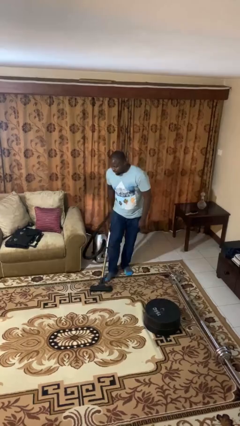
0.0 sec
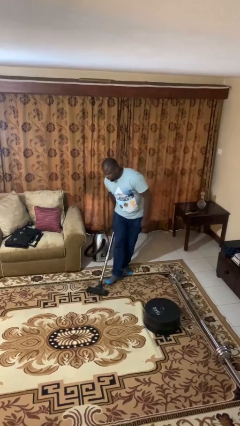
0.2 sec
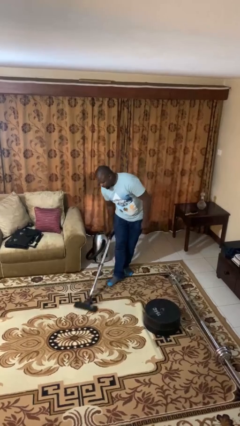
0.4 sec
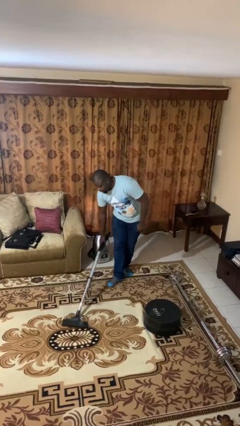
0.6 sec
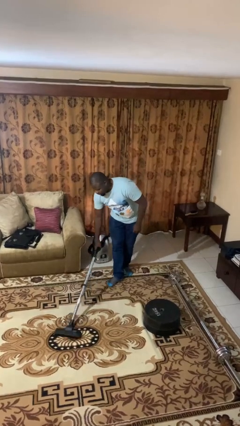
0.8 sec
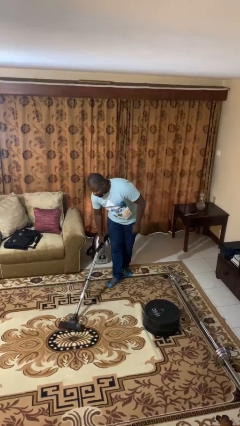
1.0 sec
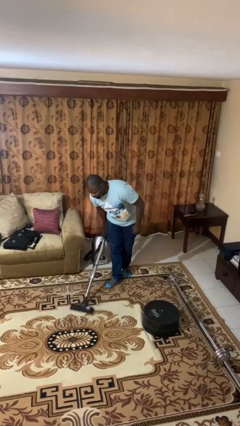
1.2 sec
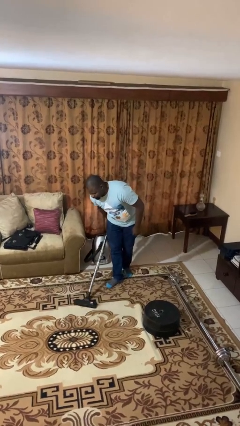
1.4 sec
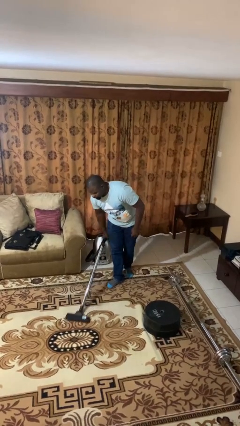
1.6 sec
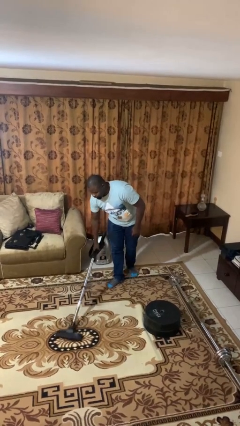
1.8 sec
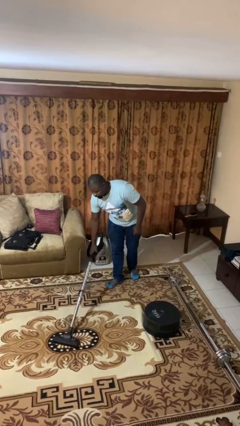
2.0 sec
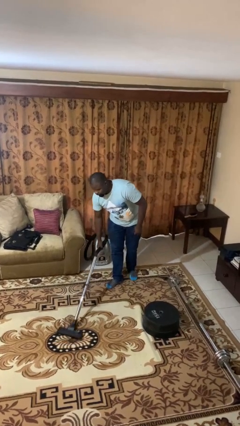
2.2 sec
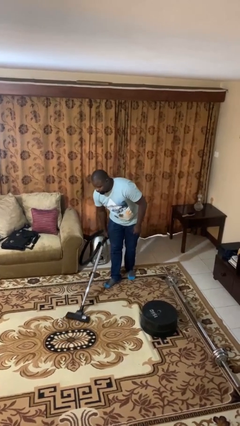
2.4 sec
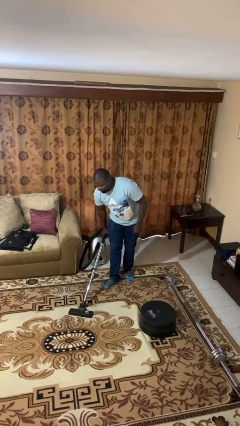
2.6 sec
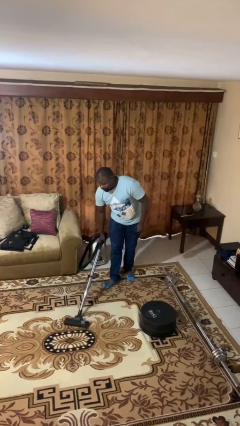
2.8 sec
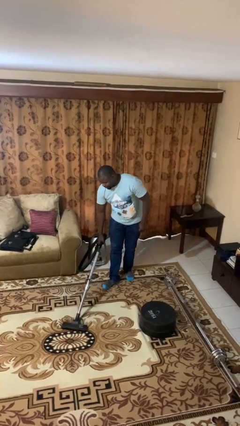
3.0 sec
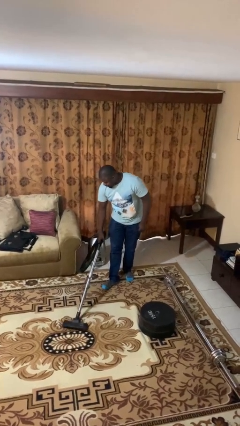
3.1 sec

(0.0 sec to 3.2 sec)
person vacuums carpet

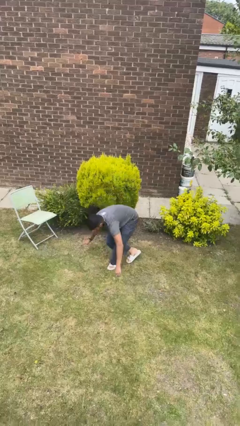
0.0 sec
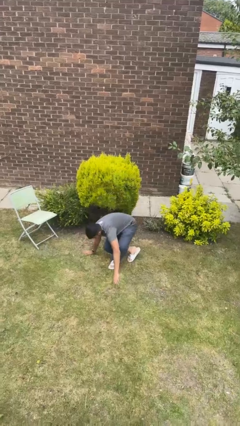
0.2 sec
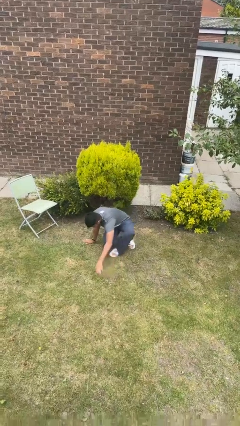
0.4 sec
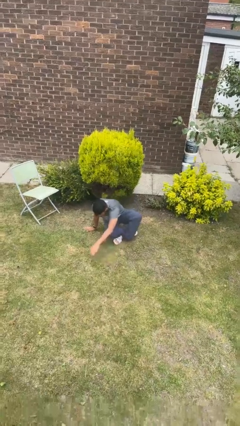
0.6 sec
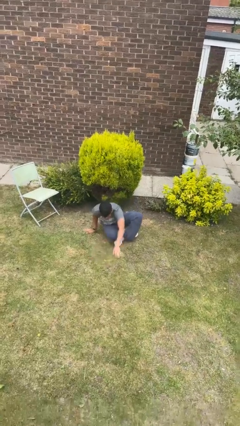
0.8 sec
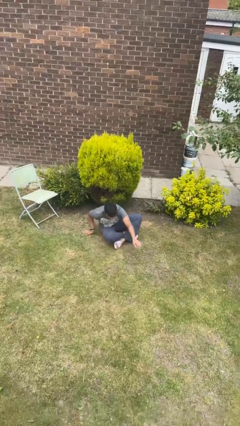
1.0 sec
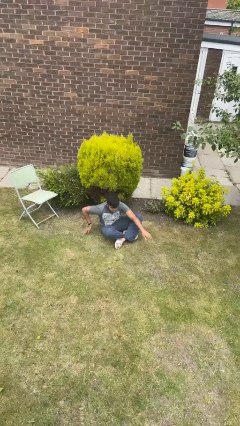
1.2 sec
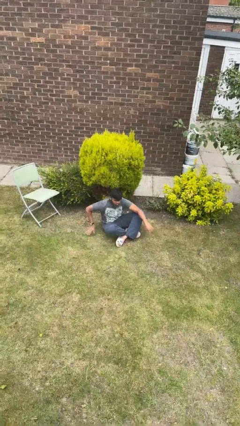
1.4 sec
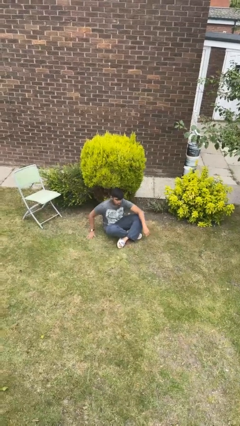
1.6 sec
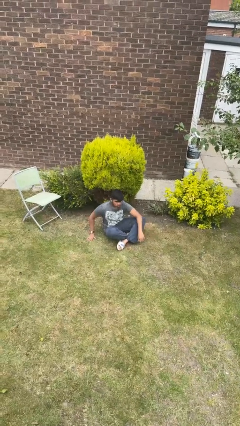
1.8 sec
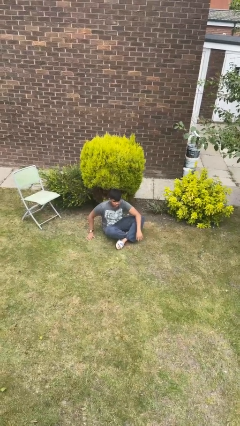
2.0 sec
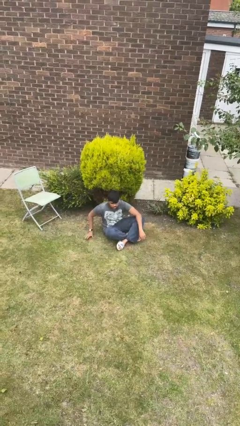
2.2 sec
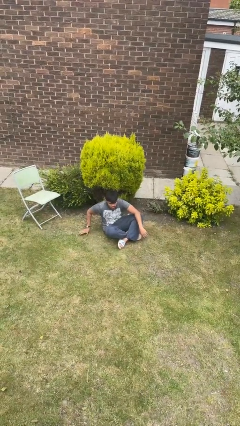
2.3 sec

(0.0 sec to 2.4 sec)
person sits crisscross

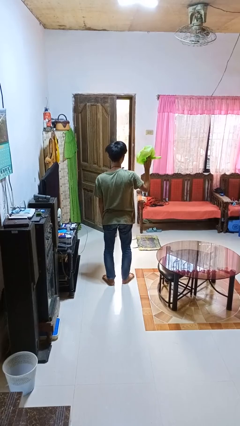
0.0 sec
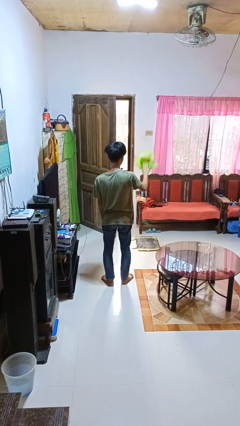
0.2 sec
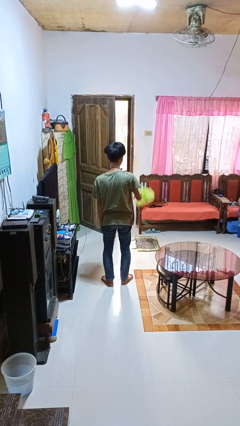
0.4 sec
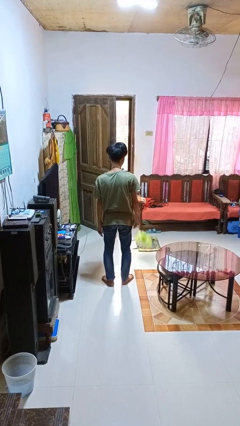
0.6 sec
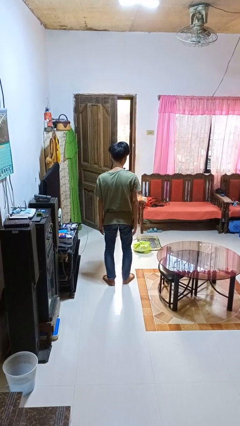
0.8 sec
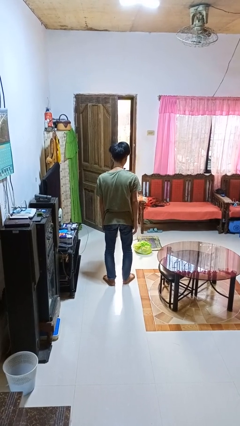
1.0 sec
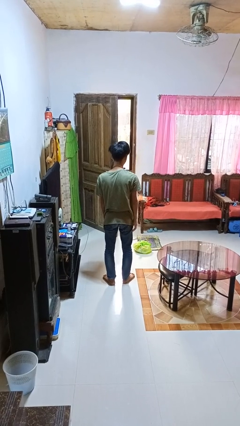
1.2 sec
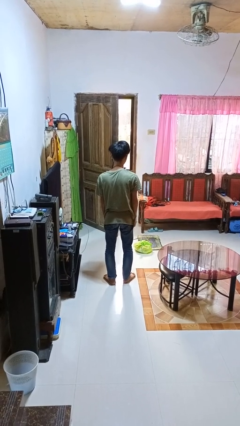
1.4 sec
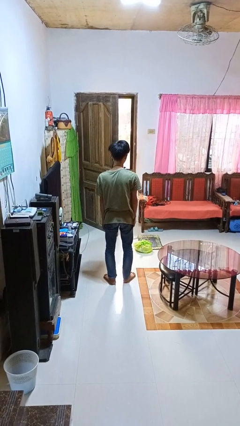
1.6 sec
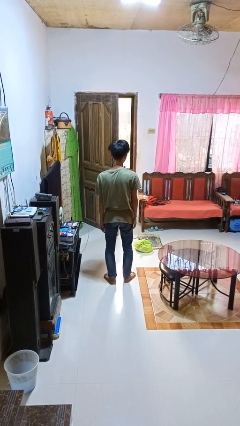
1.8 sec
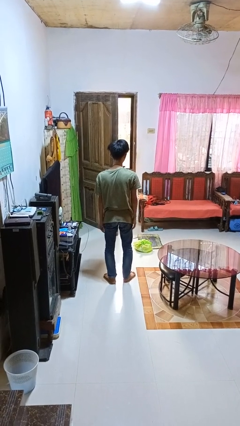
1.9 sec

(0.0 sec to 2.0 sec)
person throws object to ground

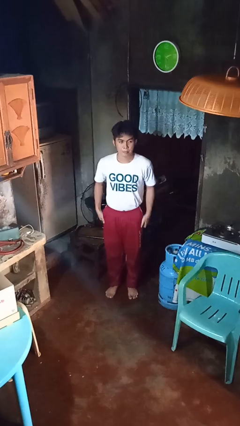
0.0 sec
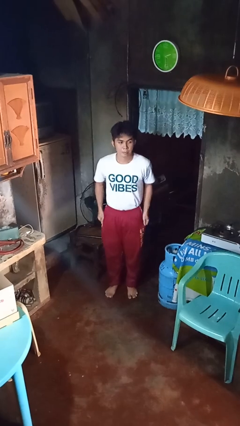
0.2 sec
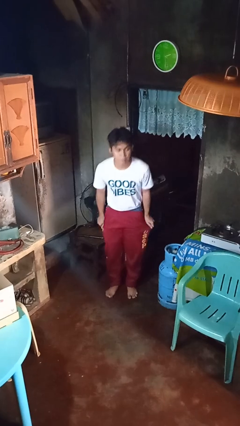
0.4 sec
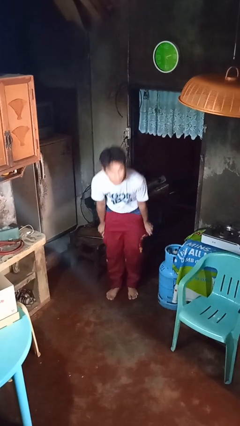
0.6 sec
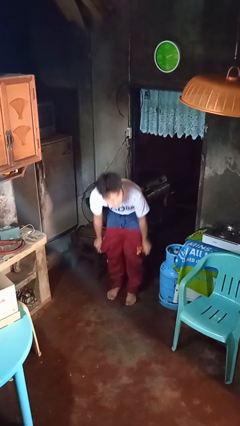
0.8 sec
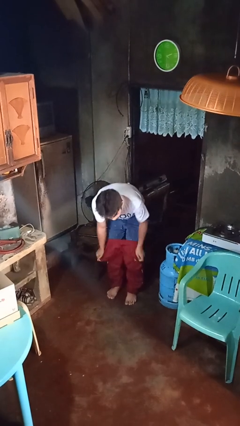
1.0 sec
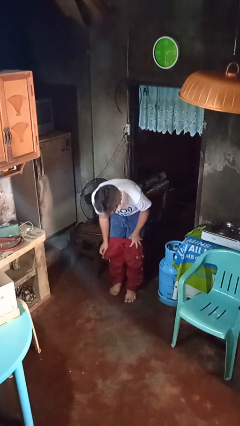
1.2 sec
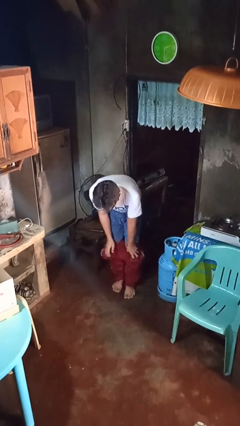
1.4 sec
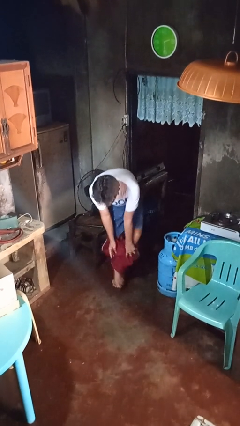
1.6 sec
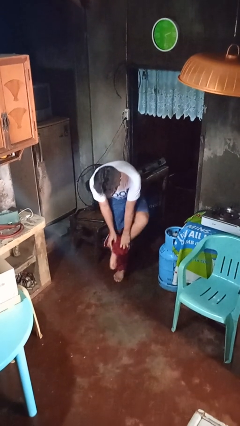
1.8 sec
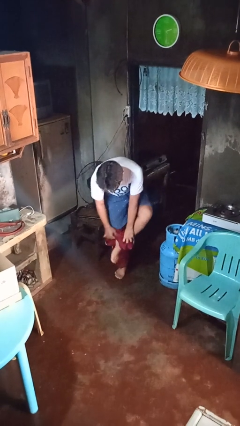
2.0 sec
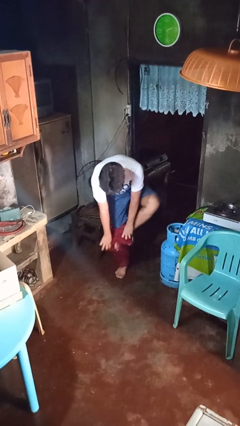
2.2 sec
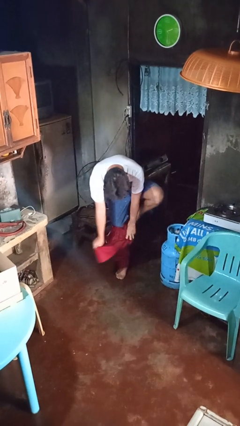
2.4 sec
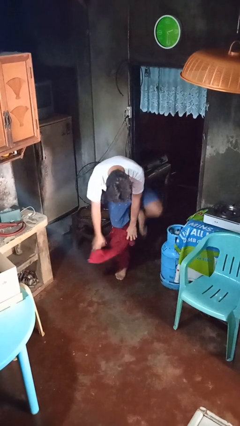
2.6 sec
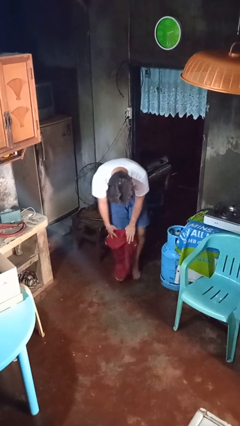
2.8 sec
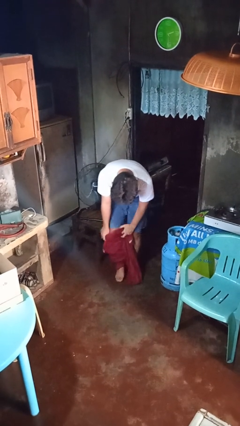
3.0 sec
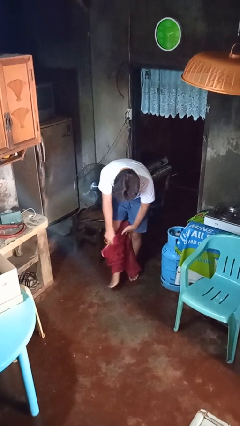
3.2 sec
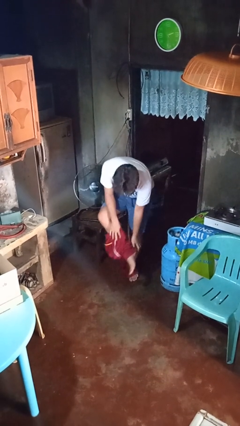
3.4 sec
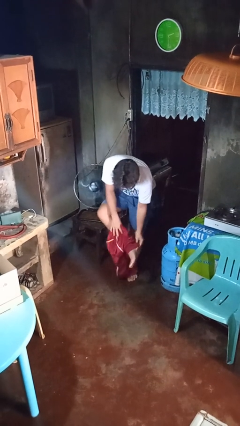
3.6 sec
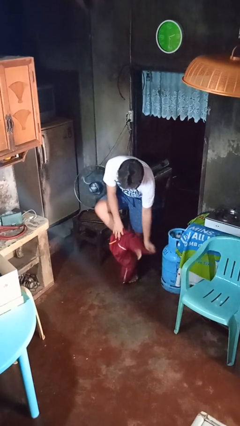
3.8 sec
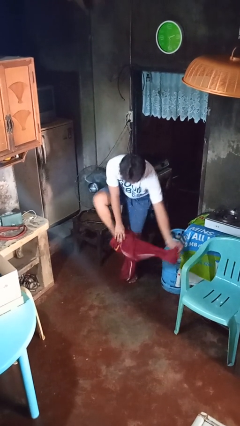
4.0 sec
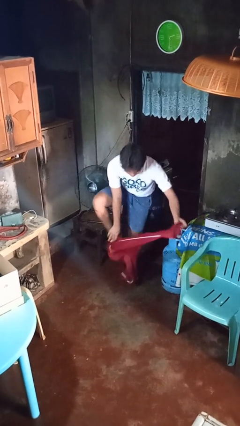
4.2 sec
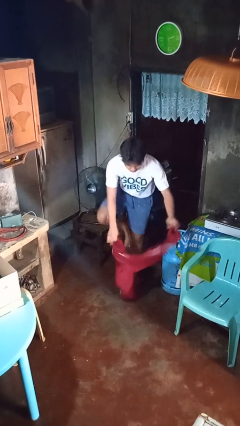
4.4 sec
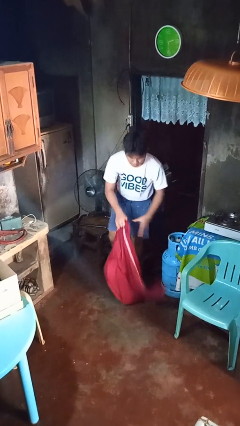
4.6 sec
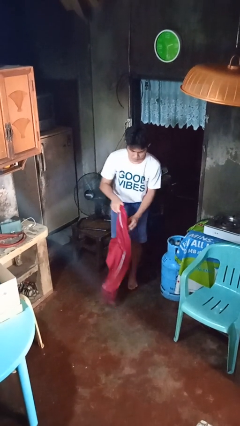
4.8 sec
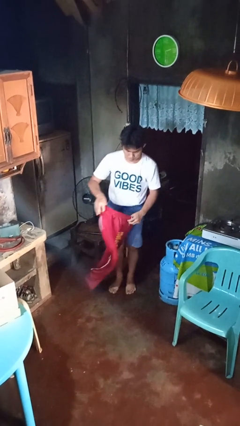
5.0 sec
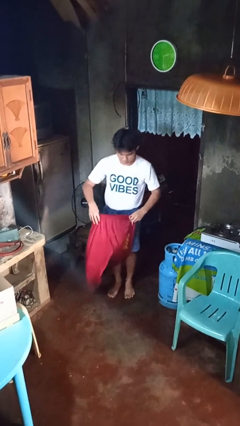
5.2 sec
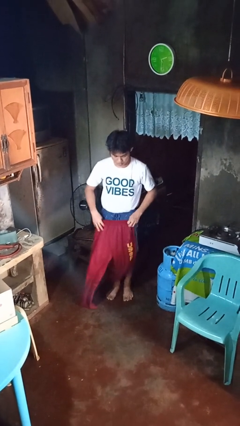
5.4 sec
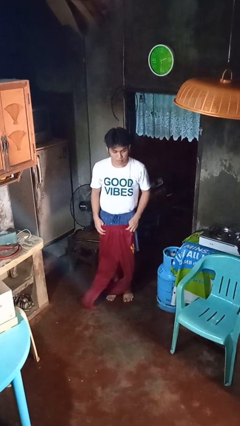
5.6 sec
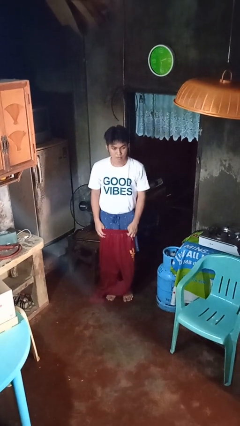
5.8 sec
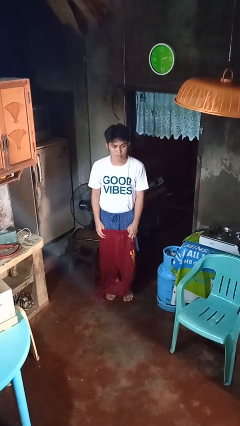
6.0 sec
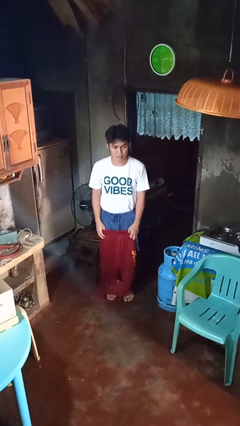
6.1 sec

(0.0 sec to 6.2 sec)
person takes off pants

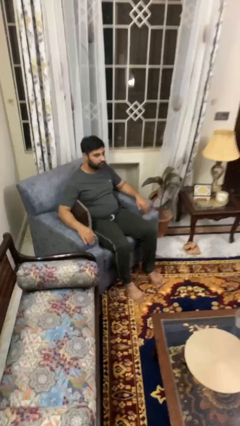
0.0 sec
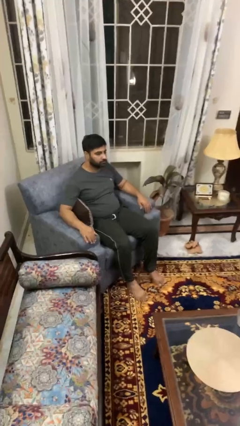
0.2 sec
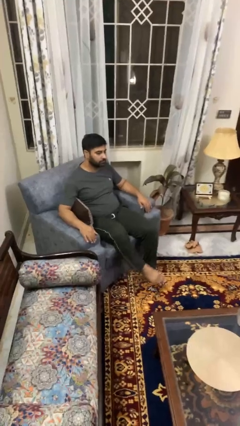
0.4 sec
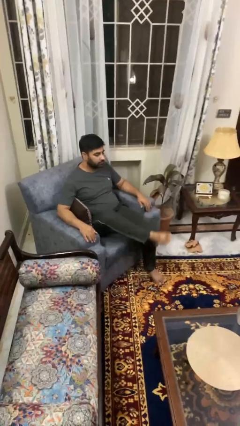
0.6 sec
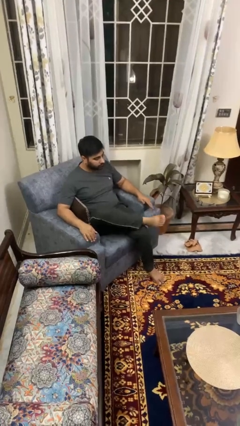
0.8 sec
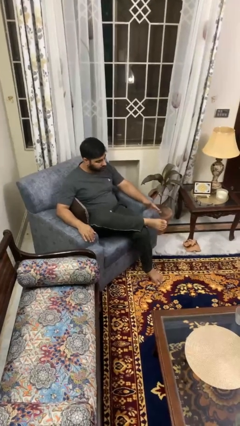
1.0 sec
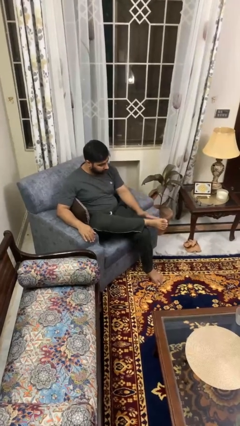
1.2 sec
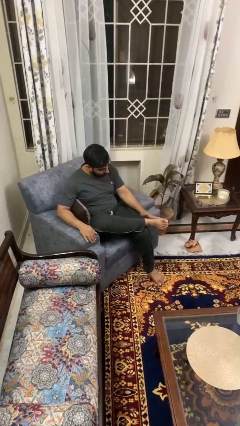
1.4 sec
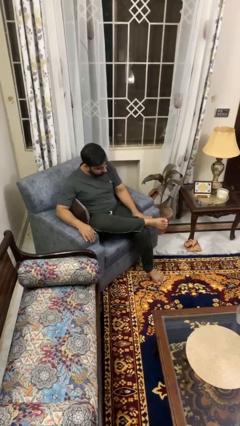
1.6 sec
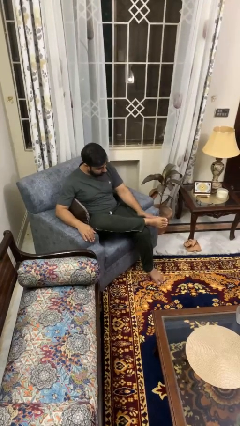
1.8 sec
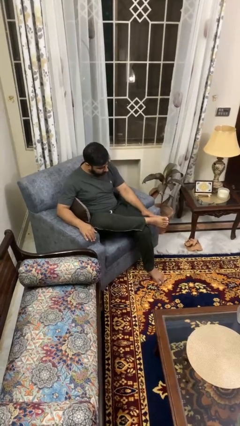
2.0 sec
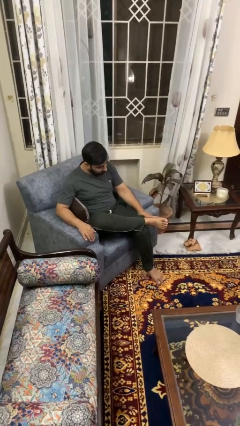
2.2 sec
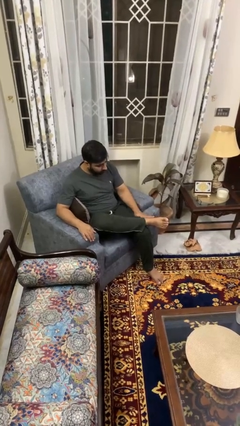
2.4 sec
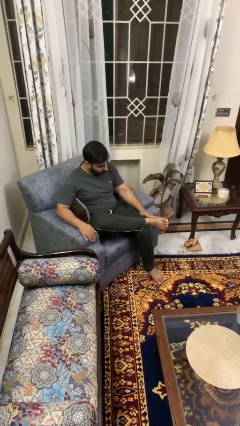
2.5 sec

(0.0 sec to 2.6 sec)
person rubs foot

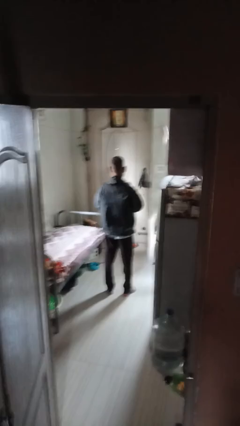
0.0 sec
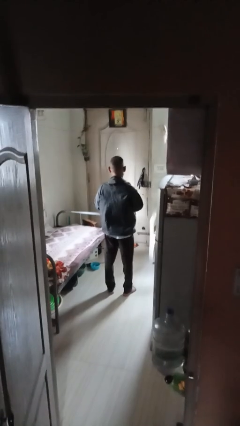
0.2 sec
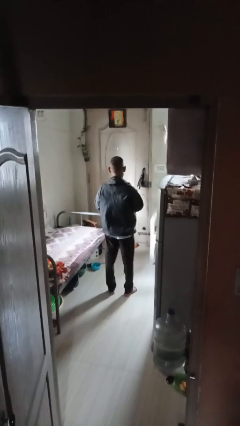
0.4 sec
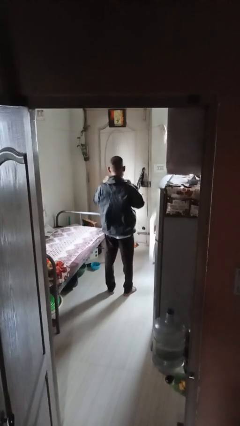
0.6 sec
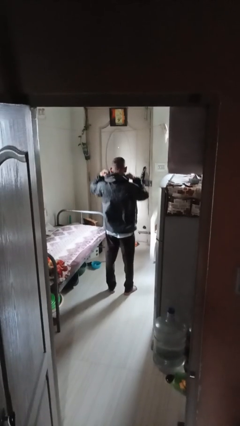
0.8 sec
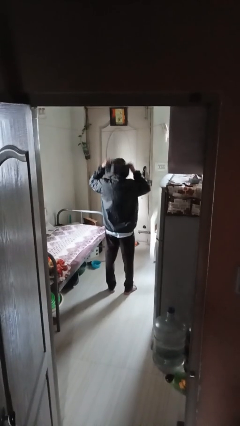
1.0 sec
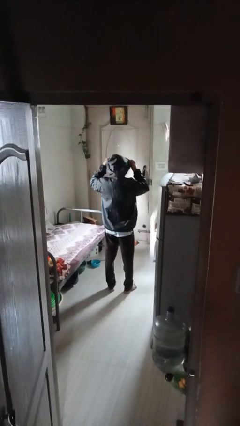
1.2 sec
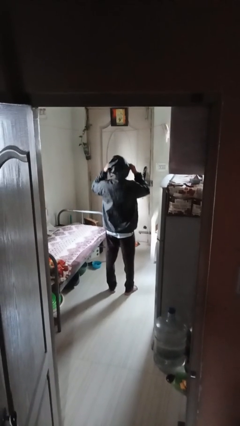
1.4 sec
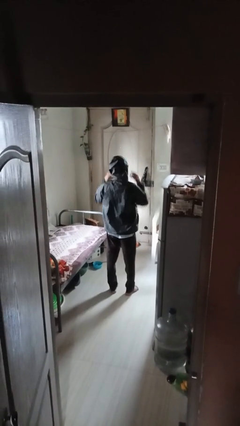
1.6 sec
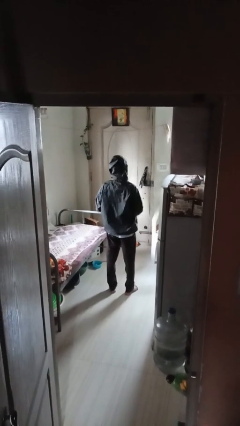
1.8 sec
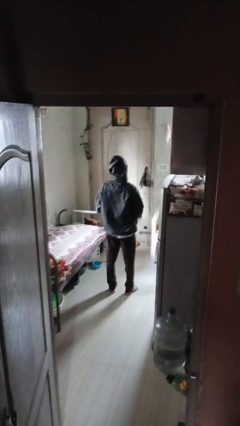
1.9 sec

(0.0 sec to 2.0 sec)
person puts on hoodie
